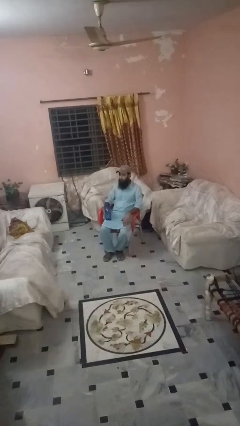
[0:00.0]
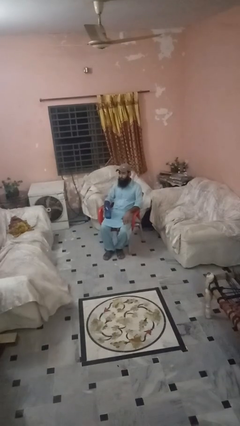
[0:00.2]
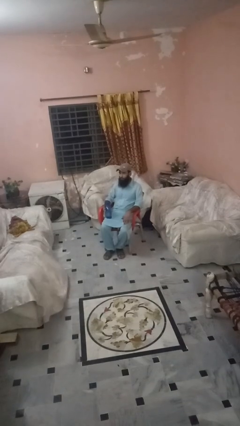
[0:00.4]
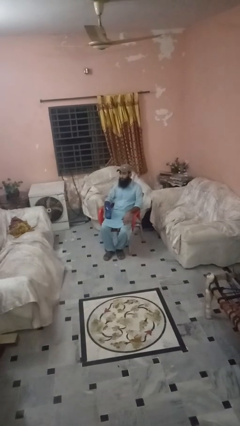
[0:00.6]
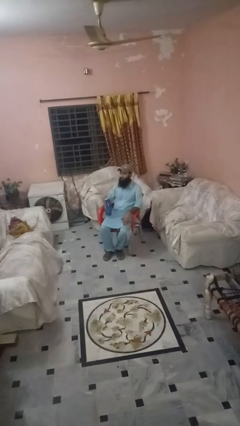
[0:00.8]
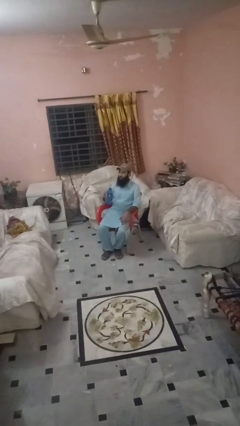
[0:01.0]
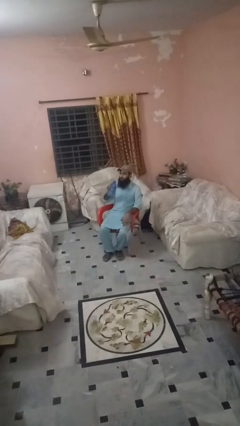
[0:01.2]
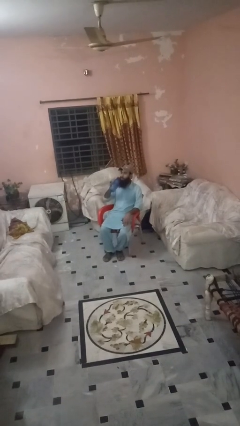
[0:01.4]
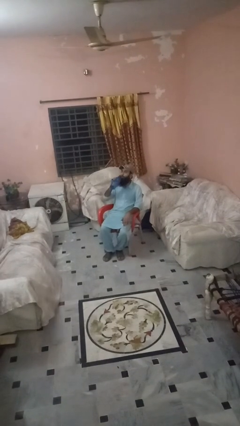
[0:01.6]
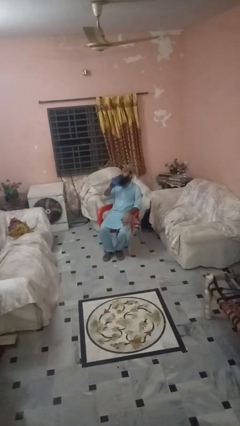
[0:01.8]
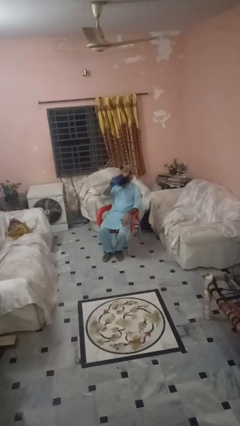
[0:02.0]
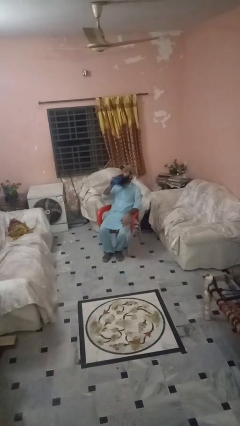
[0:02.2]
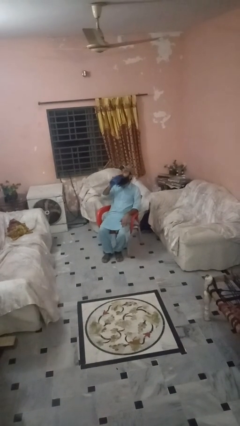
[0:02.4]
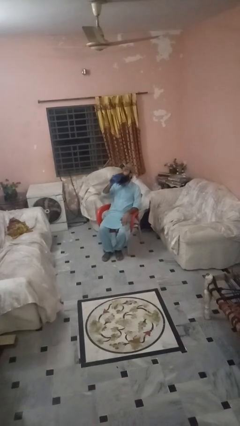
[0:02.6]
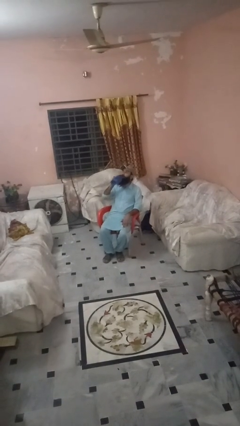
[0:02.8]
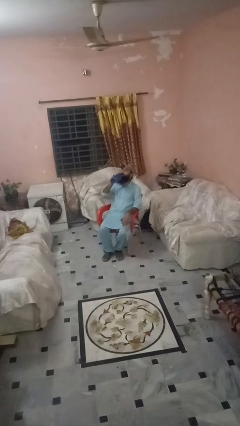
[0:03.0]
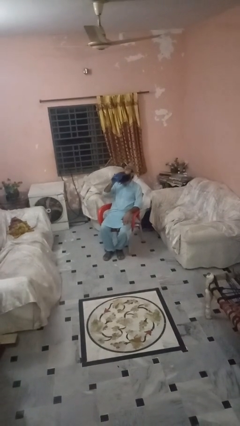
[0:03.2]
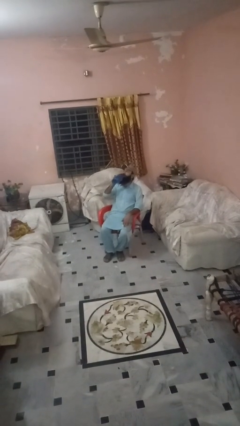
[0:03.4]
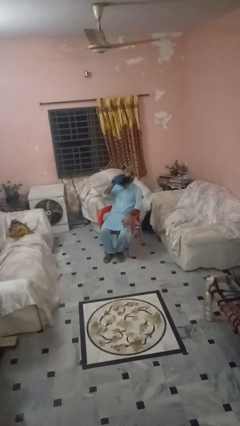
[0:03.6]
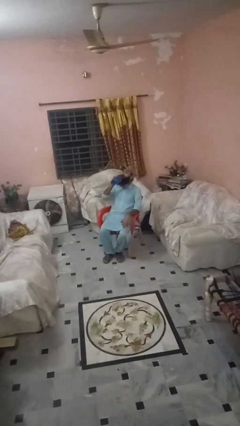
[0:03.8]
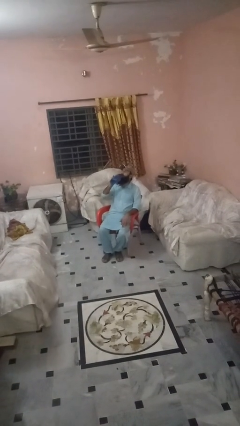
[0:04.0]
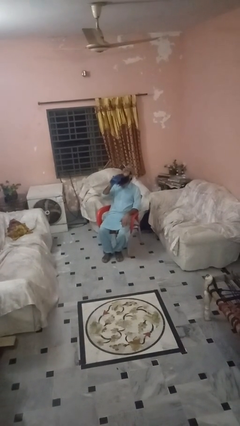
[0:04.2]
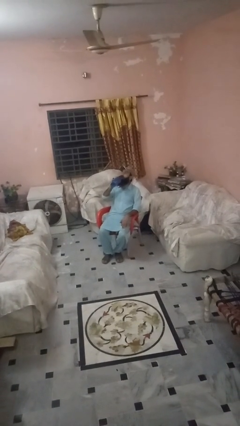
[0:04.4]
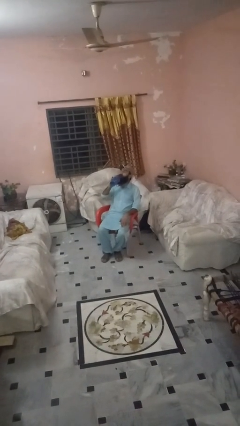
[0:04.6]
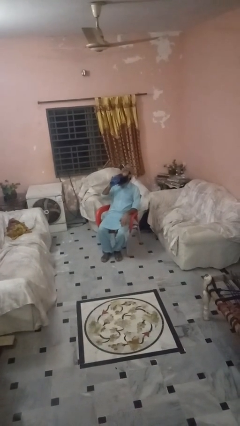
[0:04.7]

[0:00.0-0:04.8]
person drinks from bottle

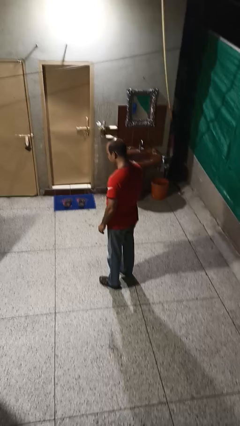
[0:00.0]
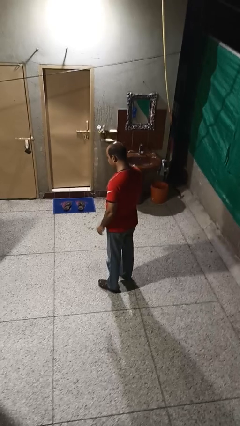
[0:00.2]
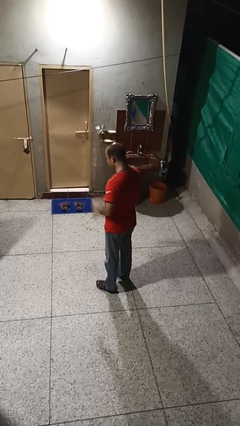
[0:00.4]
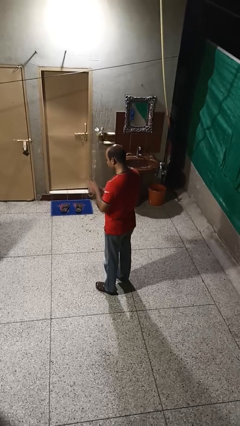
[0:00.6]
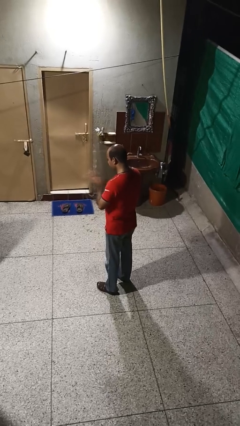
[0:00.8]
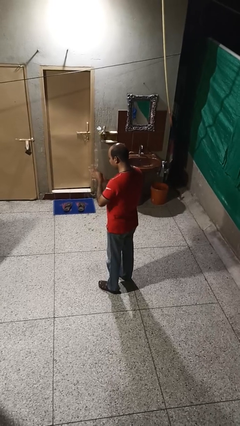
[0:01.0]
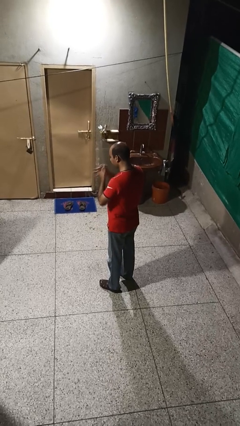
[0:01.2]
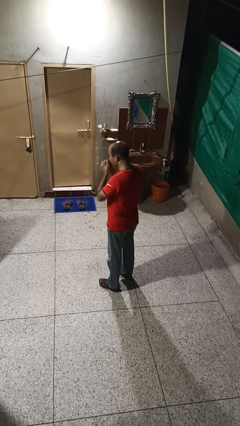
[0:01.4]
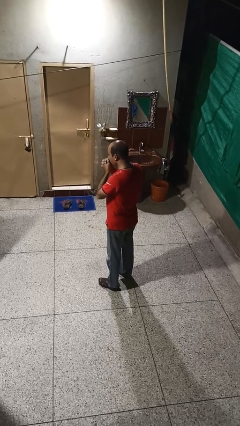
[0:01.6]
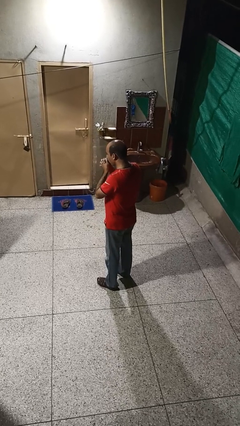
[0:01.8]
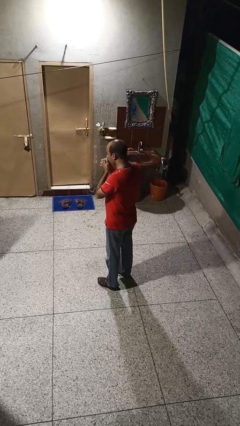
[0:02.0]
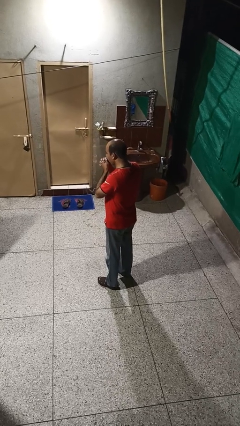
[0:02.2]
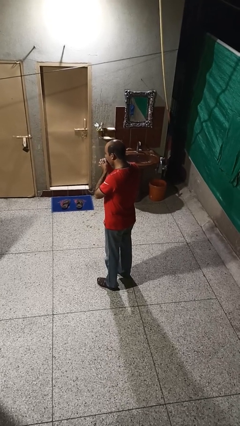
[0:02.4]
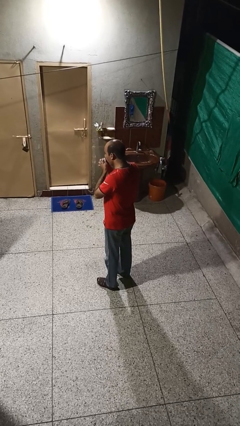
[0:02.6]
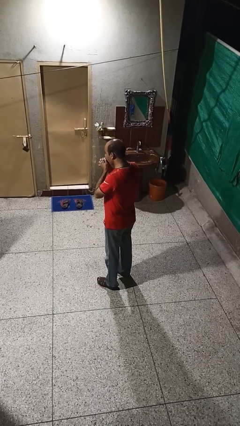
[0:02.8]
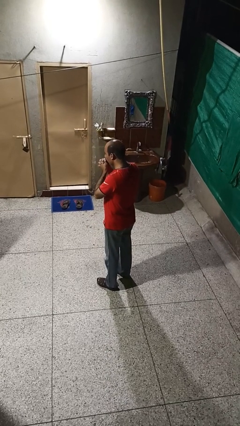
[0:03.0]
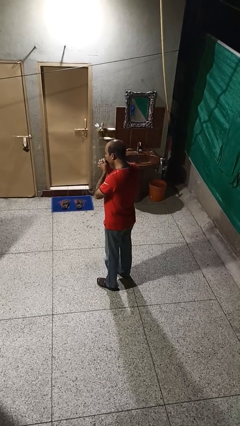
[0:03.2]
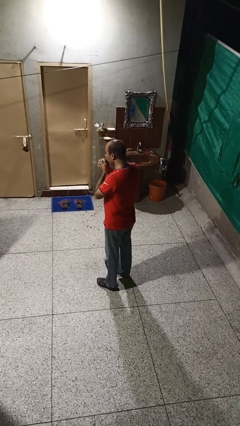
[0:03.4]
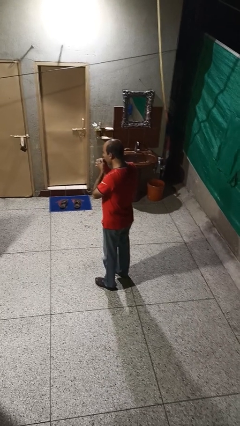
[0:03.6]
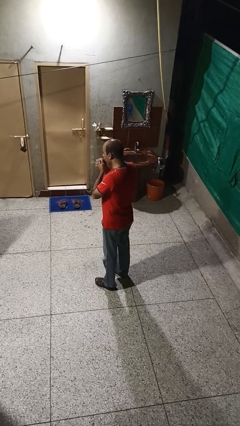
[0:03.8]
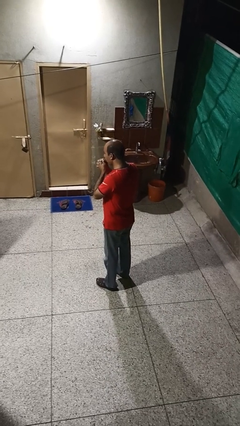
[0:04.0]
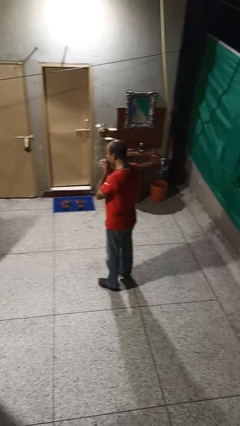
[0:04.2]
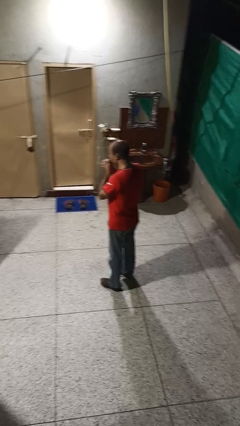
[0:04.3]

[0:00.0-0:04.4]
person blows into hands

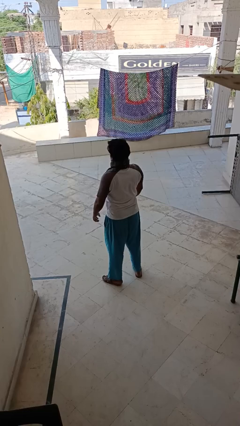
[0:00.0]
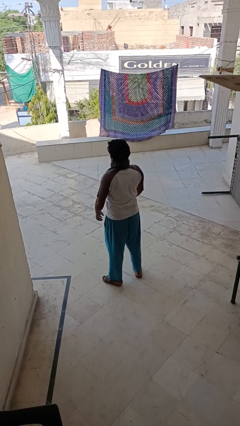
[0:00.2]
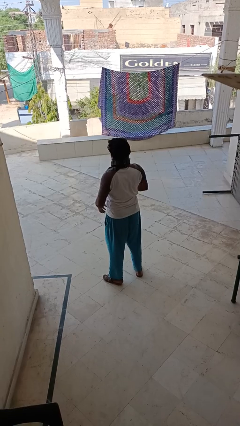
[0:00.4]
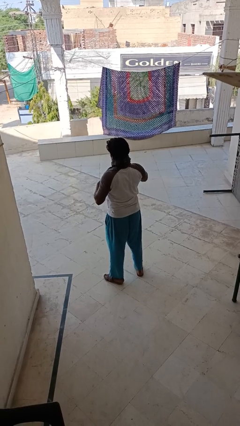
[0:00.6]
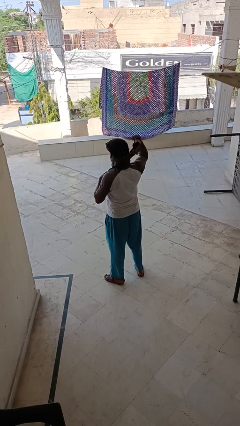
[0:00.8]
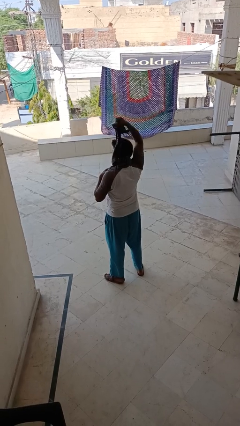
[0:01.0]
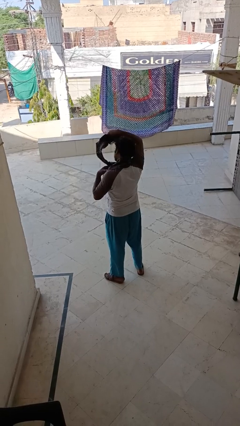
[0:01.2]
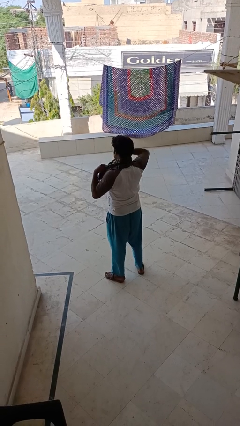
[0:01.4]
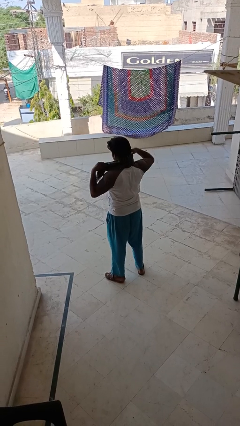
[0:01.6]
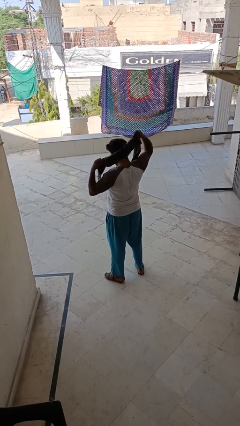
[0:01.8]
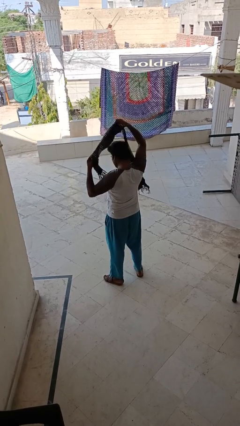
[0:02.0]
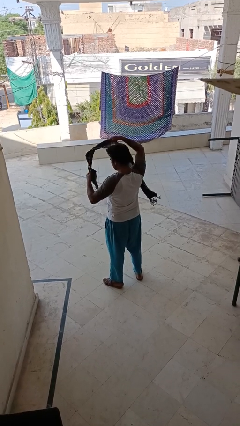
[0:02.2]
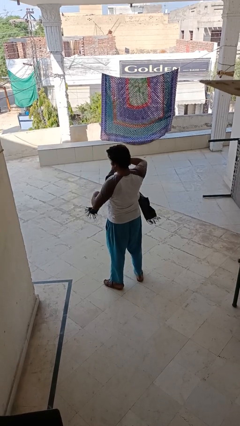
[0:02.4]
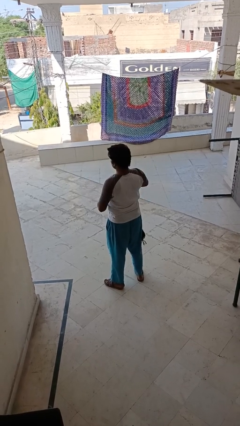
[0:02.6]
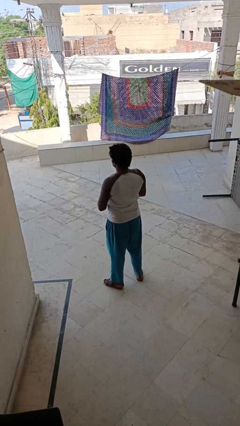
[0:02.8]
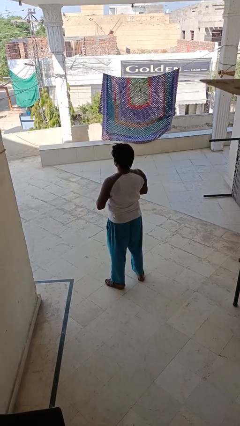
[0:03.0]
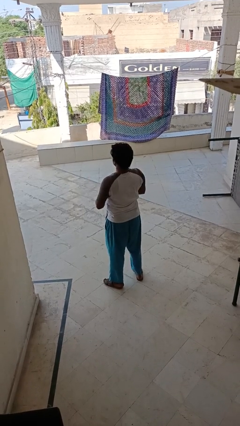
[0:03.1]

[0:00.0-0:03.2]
person takes off scarf

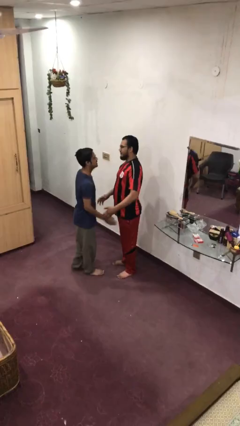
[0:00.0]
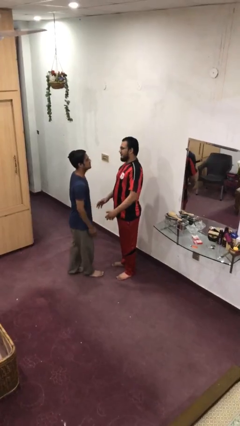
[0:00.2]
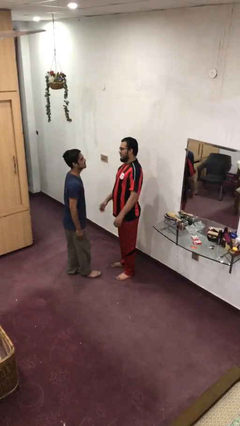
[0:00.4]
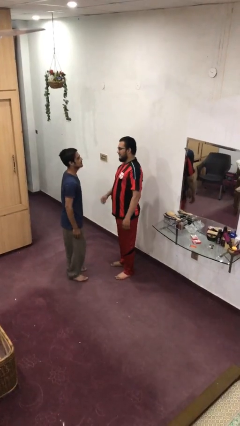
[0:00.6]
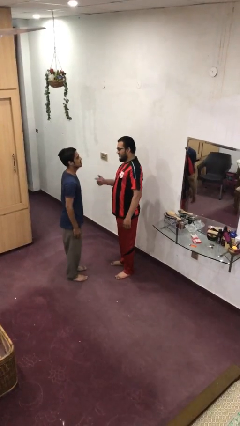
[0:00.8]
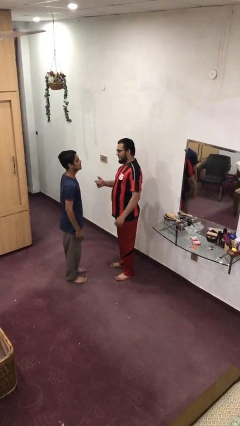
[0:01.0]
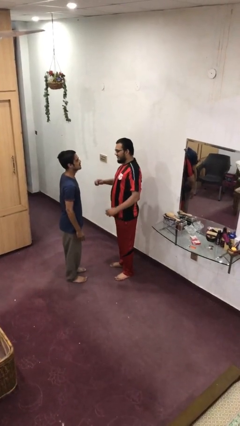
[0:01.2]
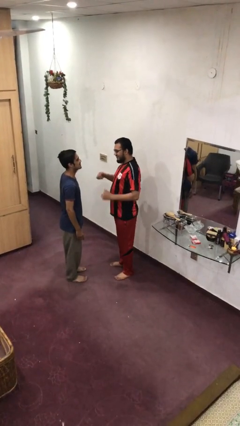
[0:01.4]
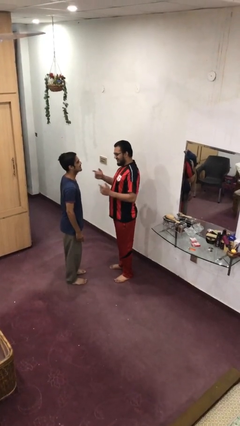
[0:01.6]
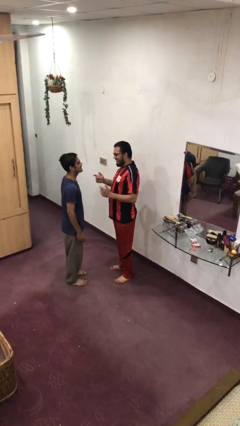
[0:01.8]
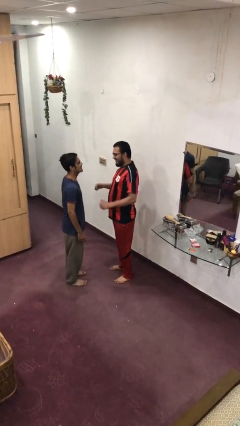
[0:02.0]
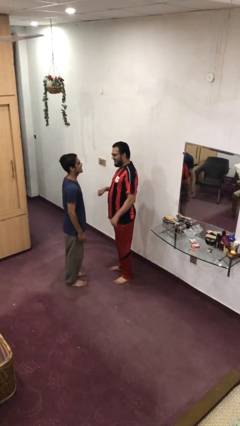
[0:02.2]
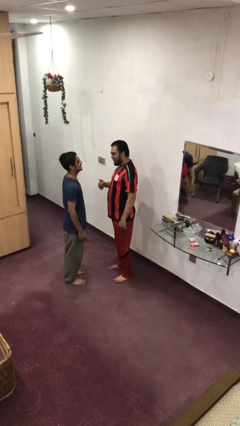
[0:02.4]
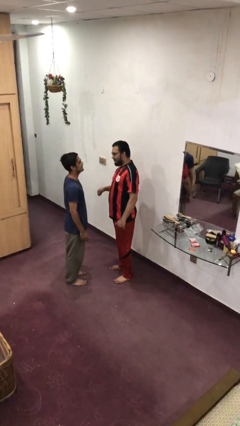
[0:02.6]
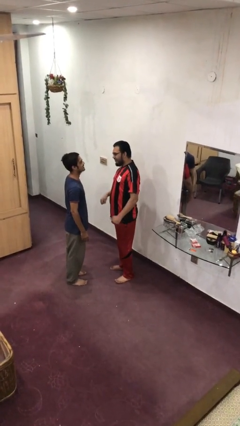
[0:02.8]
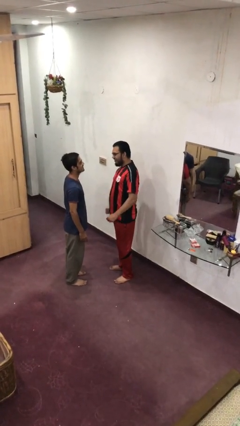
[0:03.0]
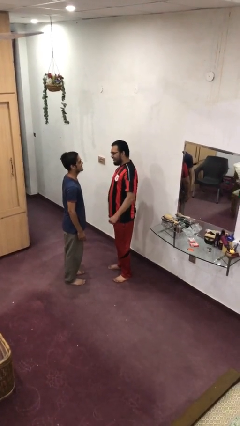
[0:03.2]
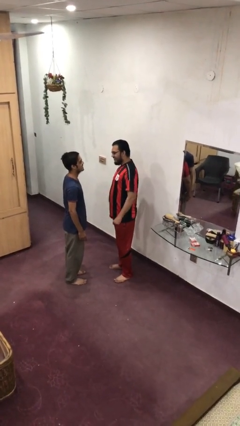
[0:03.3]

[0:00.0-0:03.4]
person talks to person

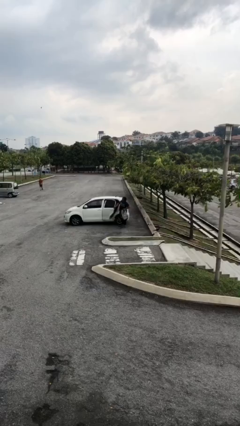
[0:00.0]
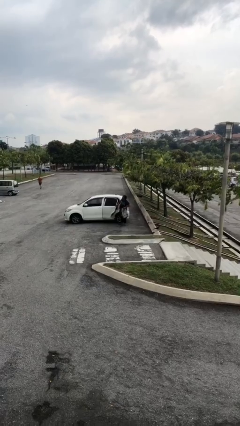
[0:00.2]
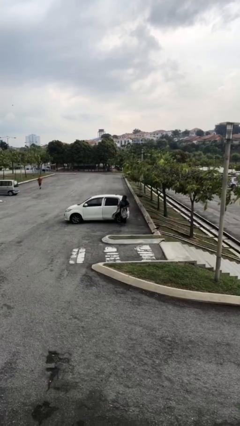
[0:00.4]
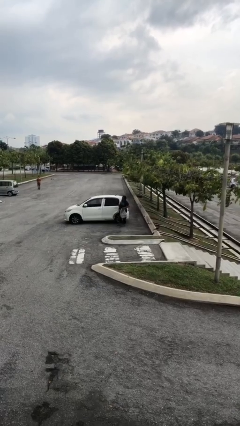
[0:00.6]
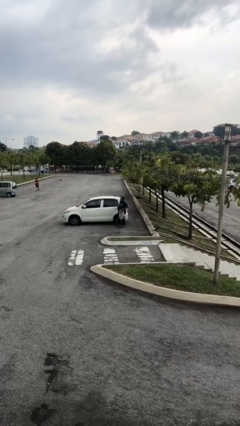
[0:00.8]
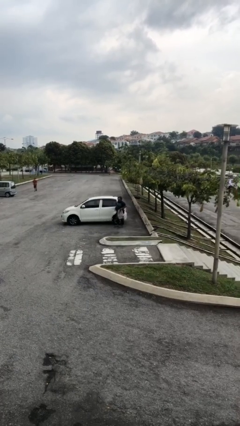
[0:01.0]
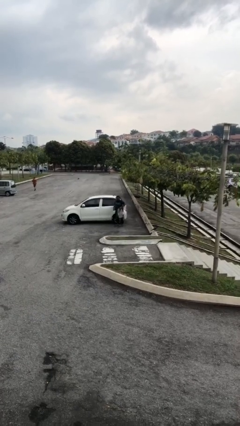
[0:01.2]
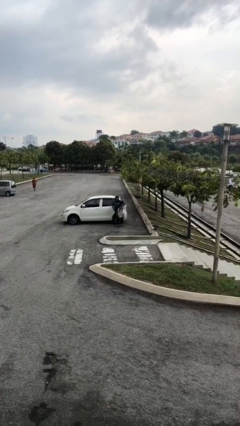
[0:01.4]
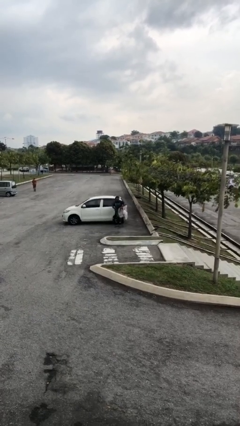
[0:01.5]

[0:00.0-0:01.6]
person closes car door

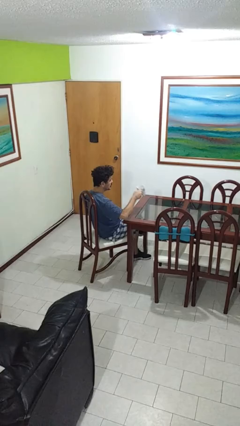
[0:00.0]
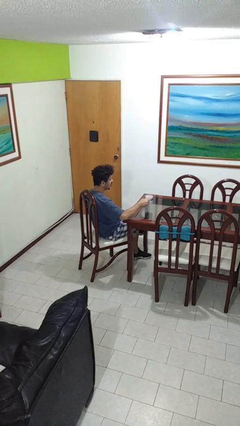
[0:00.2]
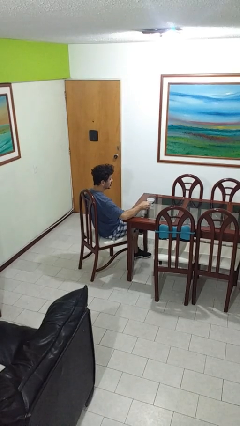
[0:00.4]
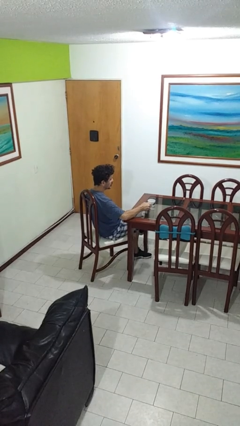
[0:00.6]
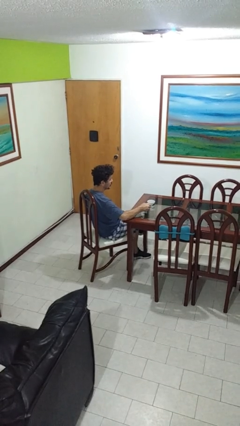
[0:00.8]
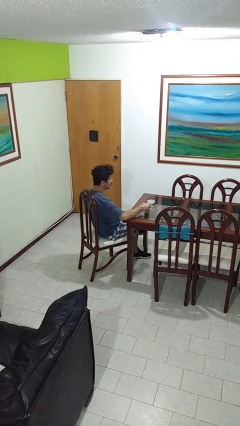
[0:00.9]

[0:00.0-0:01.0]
person puts down object on table
